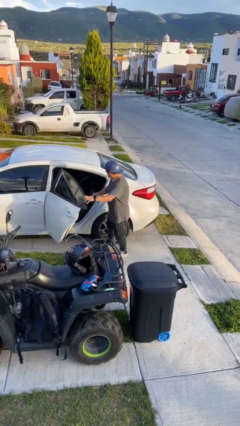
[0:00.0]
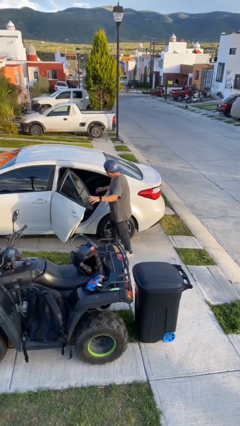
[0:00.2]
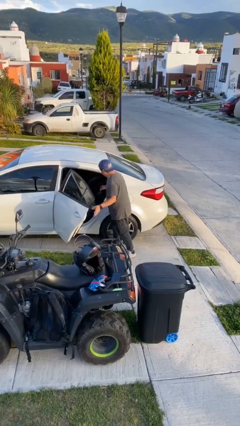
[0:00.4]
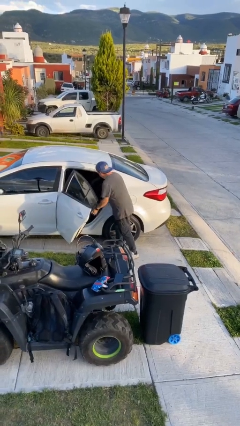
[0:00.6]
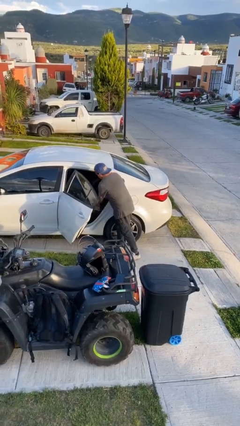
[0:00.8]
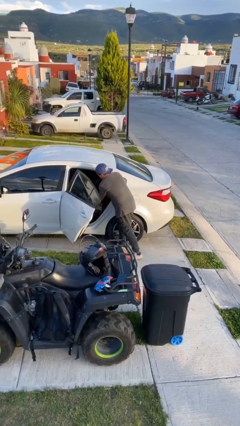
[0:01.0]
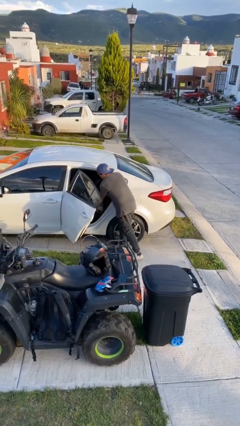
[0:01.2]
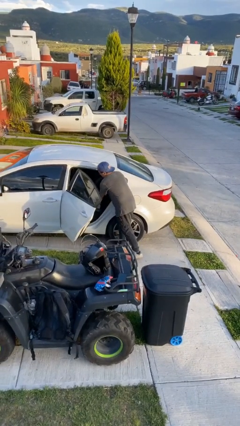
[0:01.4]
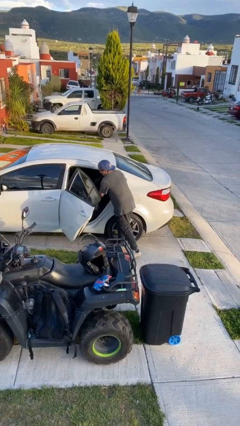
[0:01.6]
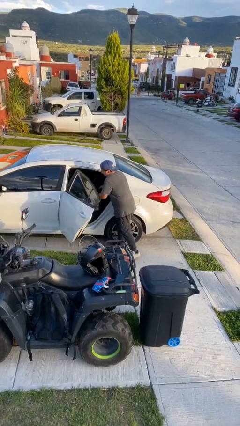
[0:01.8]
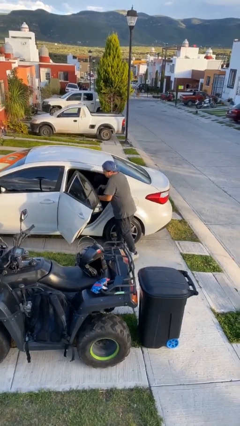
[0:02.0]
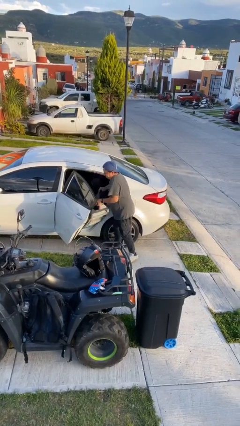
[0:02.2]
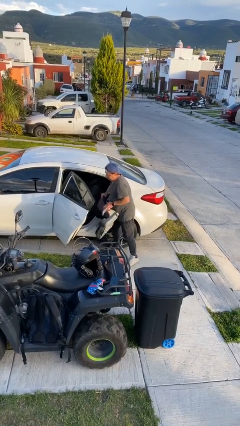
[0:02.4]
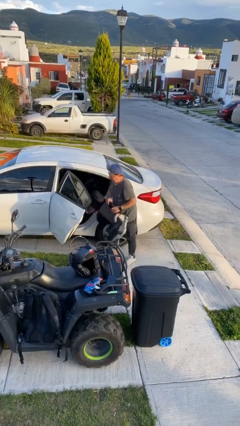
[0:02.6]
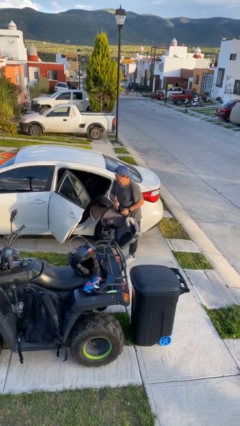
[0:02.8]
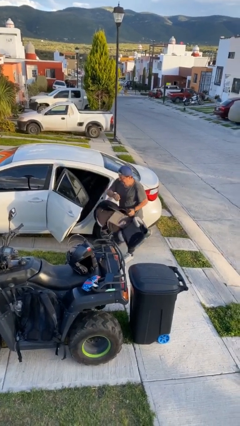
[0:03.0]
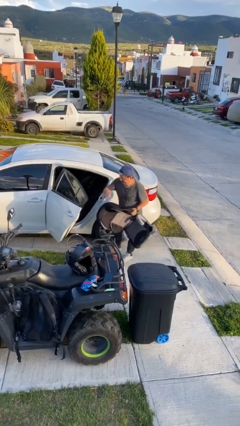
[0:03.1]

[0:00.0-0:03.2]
person unloads car

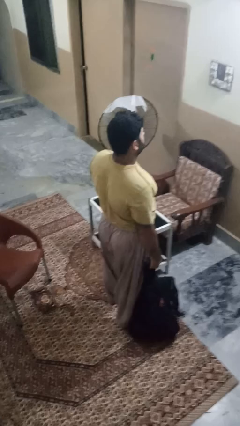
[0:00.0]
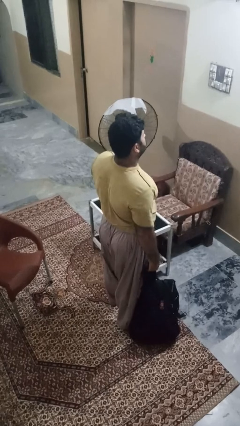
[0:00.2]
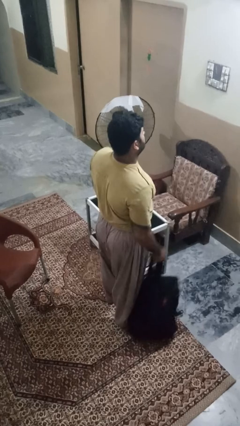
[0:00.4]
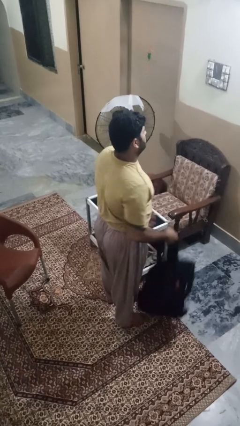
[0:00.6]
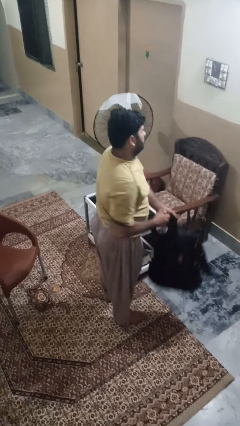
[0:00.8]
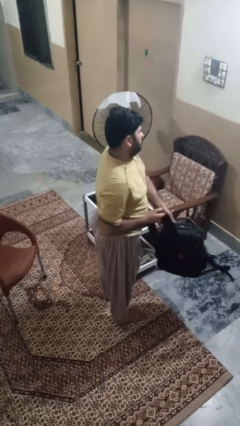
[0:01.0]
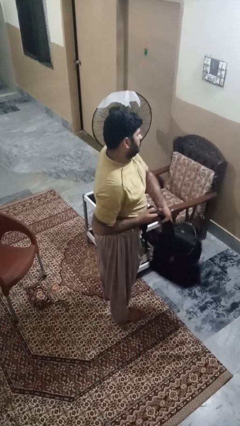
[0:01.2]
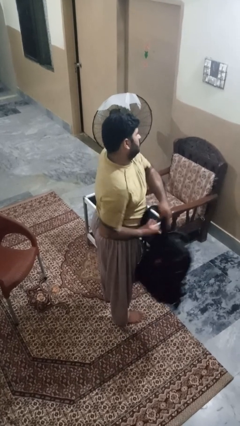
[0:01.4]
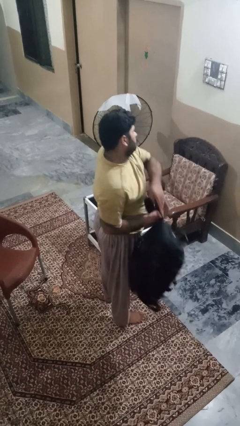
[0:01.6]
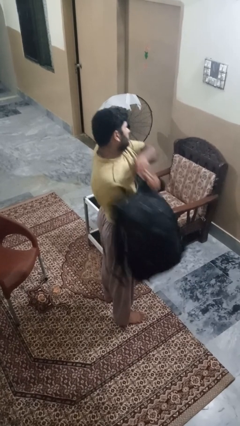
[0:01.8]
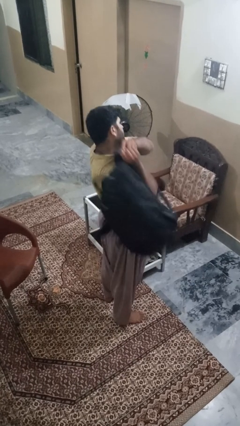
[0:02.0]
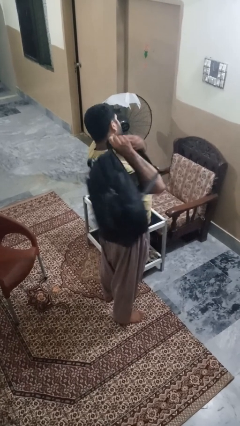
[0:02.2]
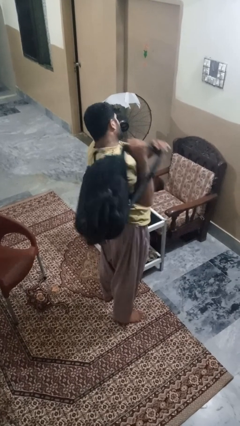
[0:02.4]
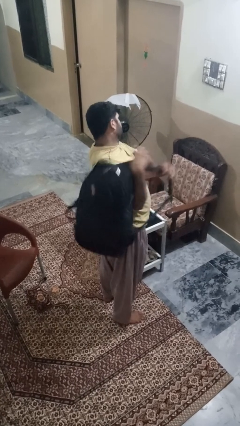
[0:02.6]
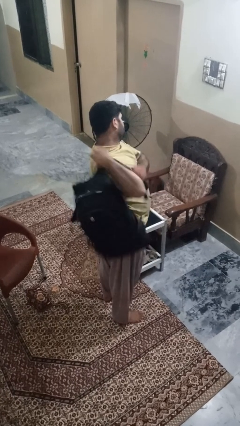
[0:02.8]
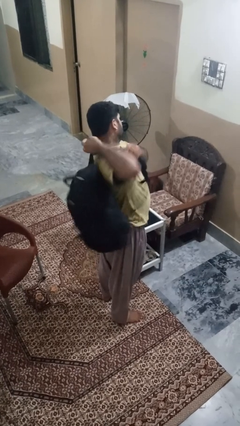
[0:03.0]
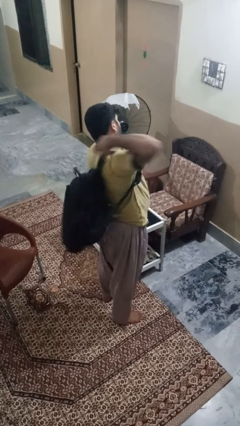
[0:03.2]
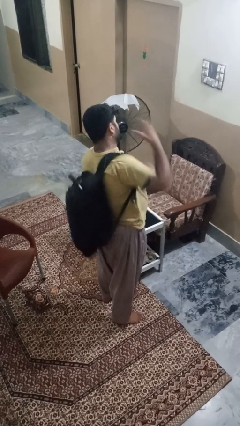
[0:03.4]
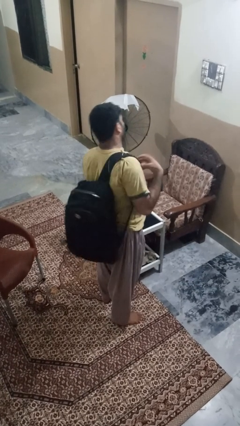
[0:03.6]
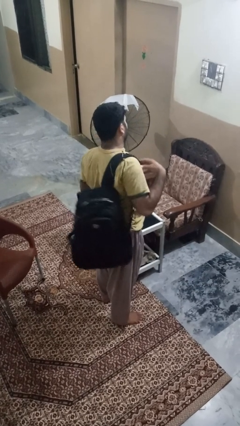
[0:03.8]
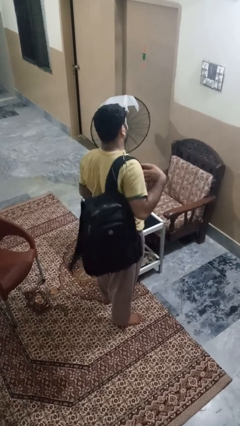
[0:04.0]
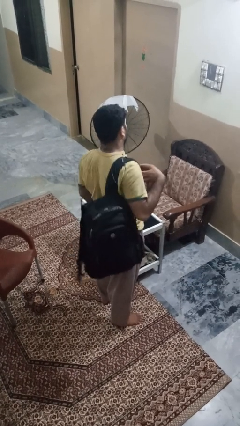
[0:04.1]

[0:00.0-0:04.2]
person puts on backpack

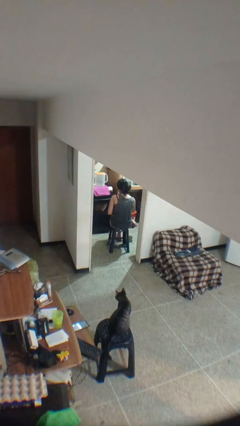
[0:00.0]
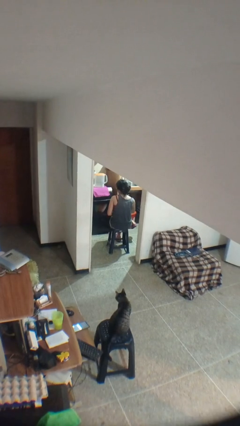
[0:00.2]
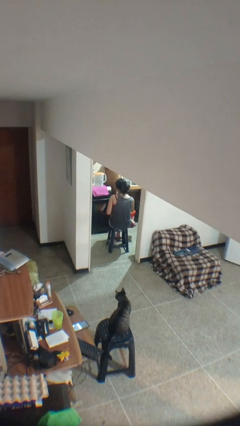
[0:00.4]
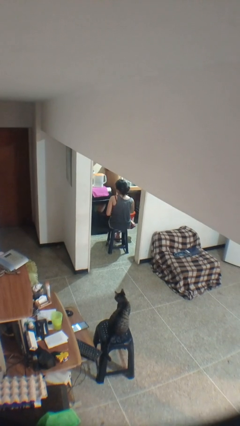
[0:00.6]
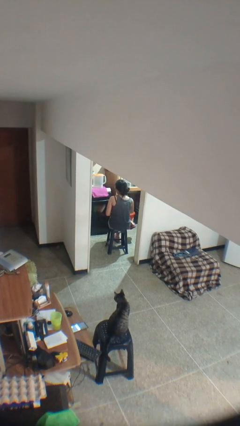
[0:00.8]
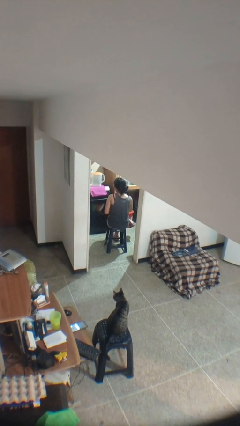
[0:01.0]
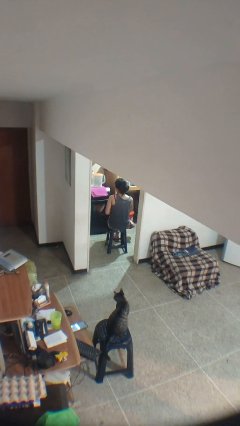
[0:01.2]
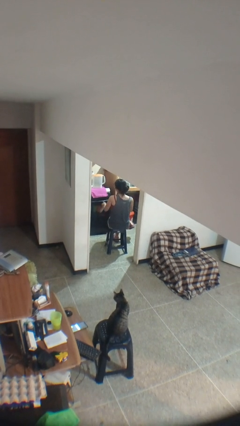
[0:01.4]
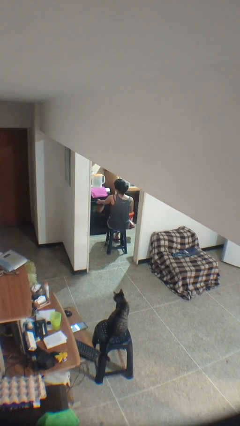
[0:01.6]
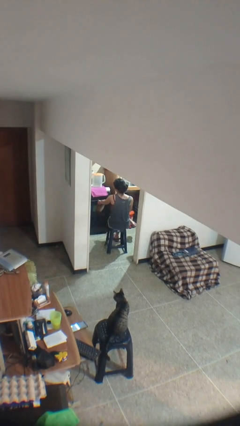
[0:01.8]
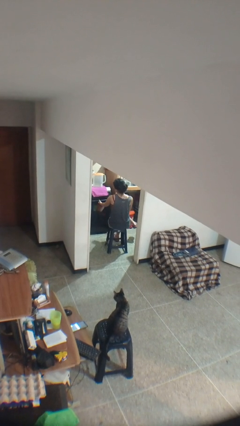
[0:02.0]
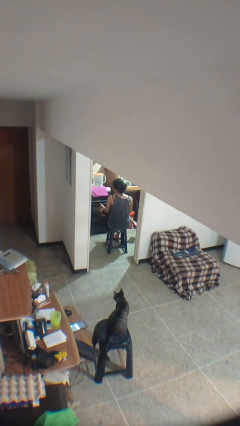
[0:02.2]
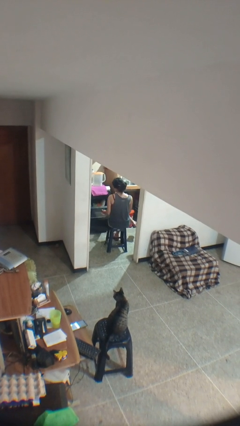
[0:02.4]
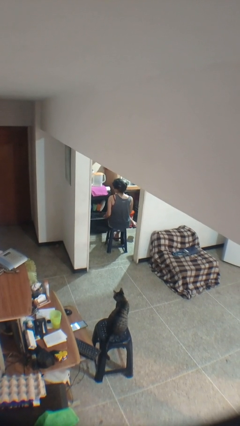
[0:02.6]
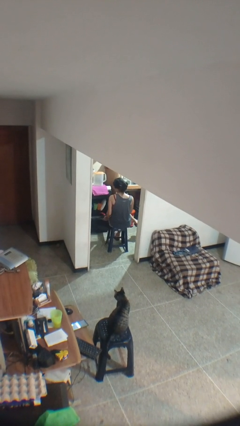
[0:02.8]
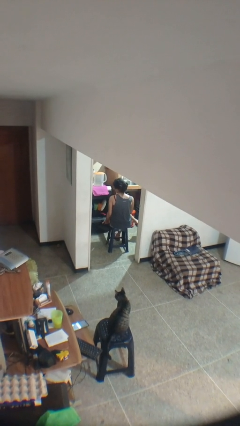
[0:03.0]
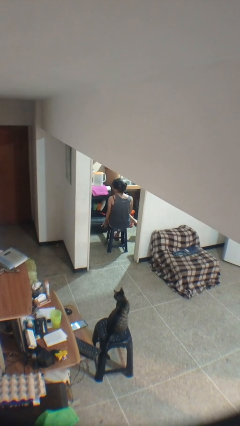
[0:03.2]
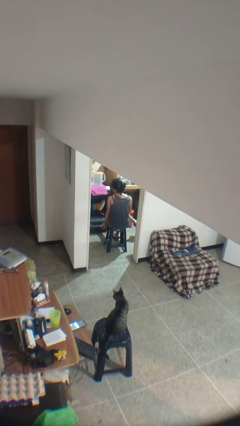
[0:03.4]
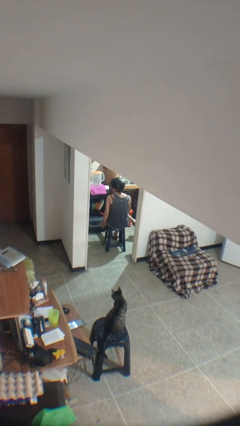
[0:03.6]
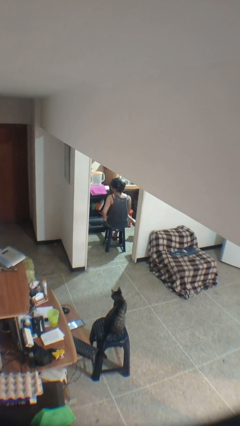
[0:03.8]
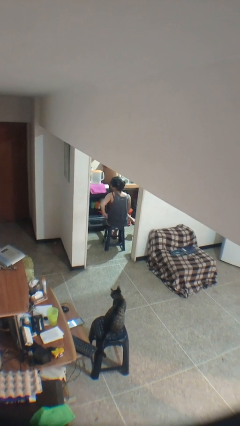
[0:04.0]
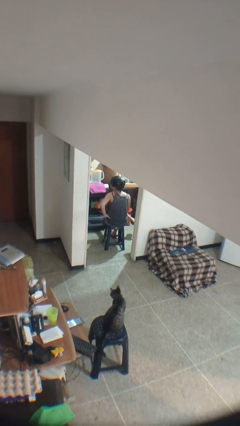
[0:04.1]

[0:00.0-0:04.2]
person opens dishwasher

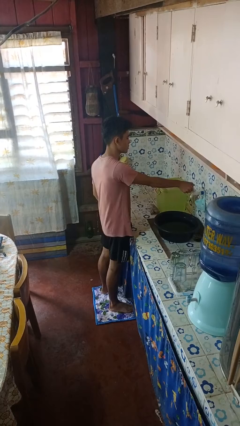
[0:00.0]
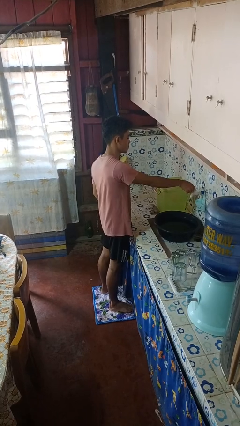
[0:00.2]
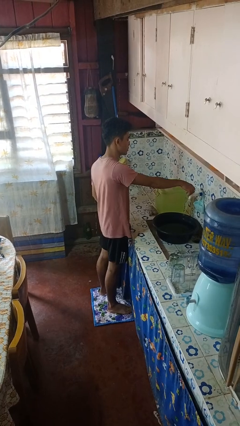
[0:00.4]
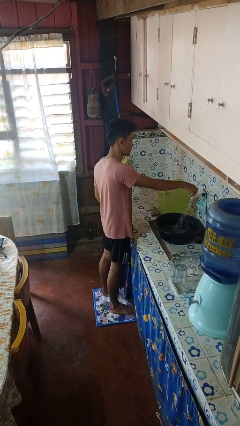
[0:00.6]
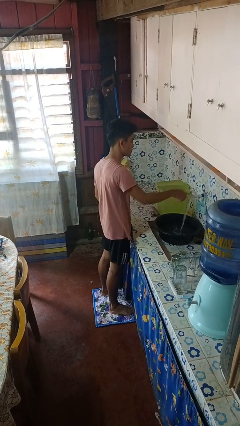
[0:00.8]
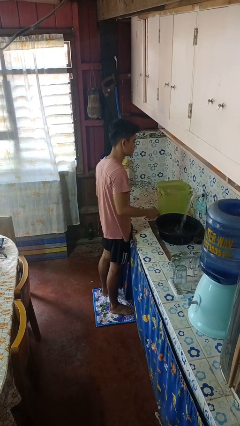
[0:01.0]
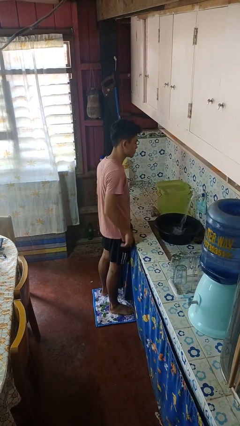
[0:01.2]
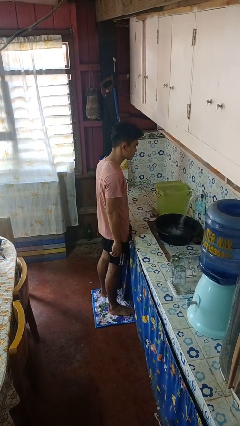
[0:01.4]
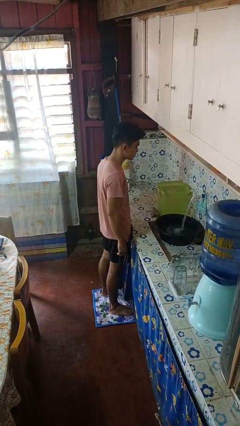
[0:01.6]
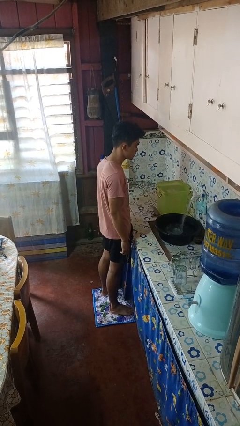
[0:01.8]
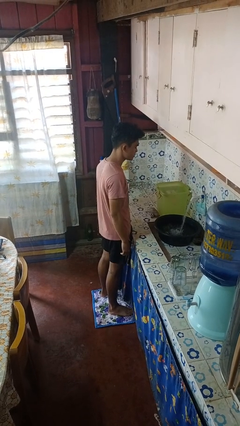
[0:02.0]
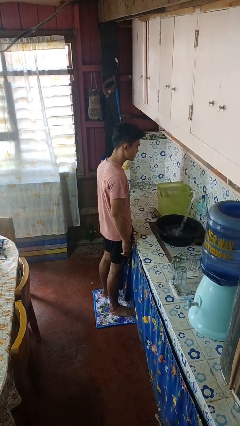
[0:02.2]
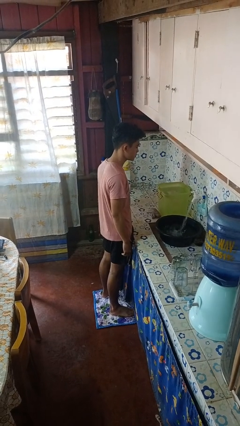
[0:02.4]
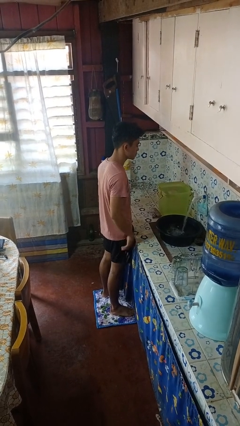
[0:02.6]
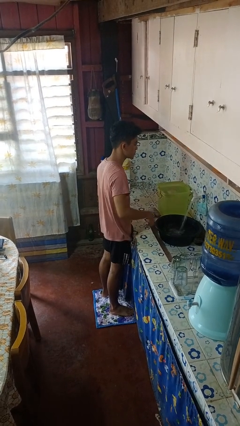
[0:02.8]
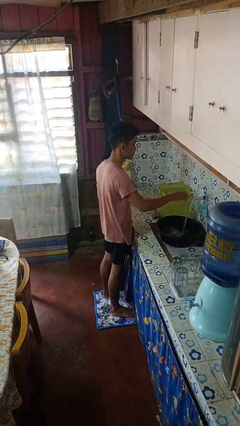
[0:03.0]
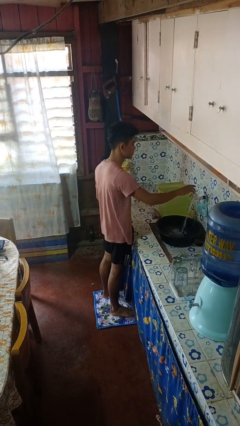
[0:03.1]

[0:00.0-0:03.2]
person turns on faucet

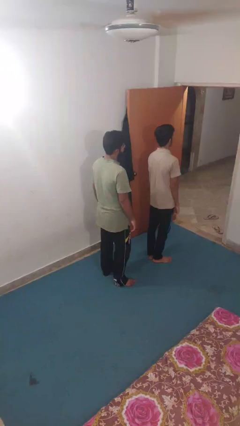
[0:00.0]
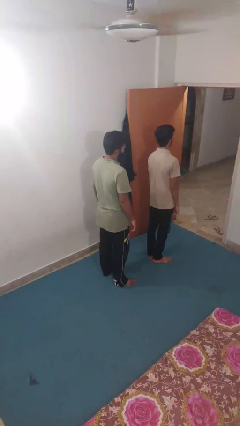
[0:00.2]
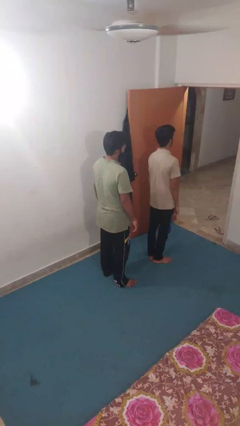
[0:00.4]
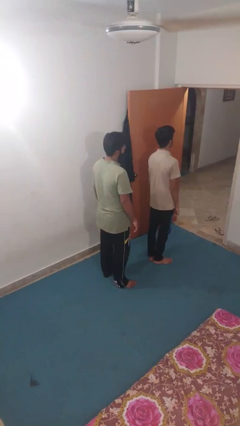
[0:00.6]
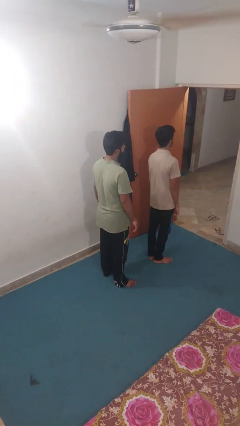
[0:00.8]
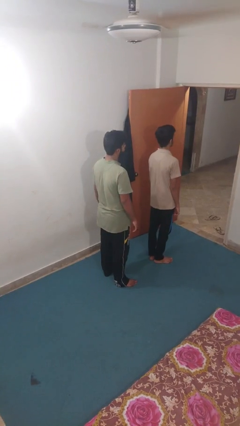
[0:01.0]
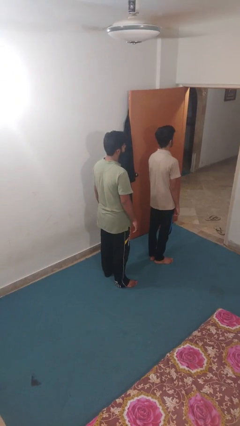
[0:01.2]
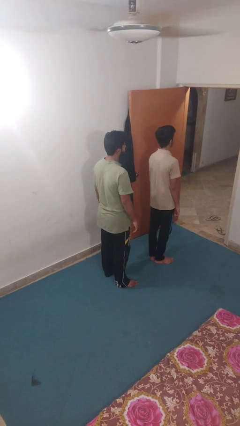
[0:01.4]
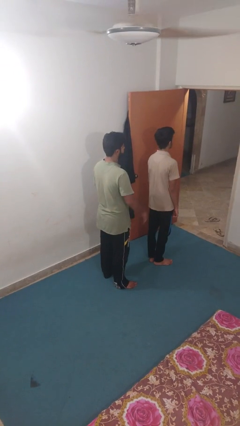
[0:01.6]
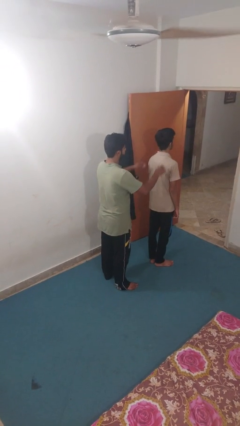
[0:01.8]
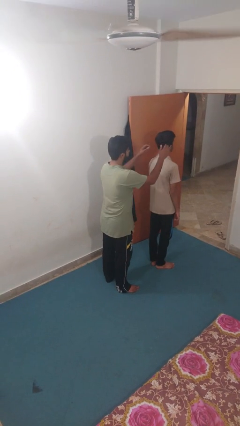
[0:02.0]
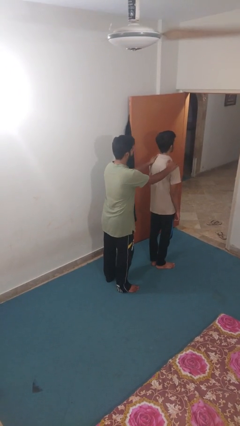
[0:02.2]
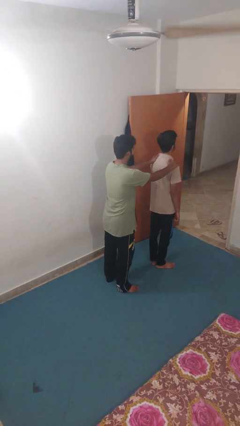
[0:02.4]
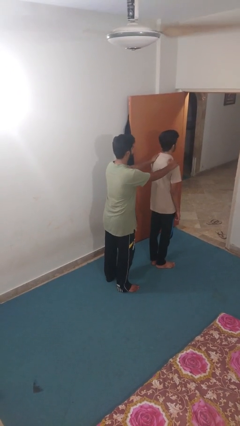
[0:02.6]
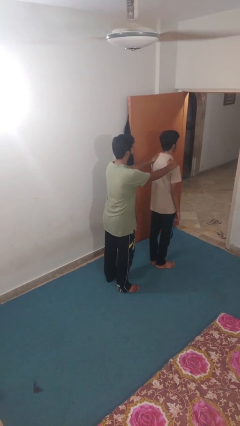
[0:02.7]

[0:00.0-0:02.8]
person grabs person by shoulder
